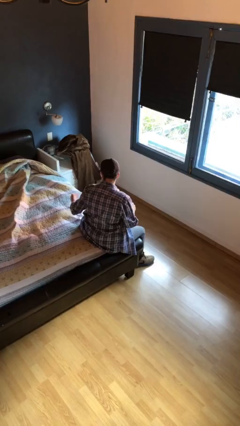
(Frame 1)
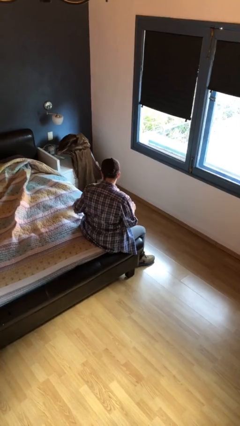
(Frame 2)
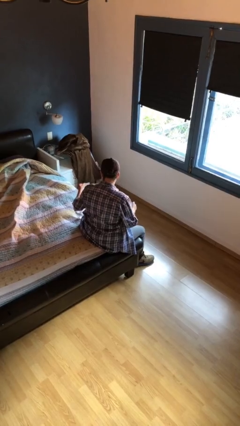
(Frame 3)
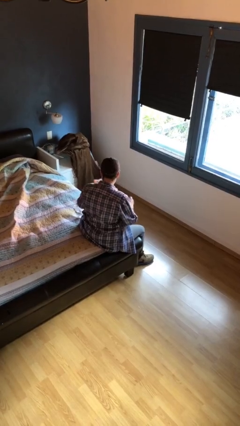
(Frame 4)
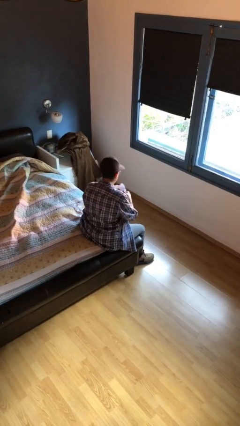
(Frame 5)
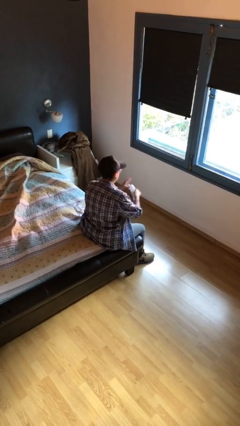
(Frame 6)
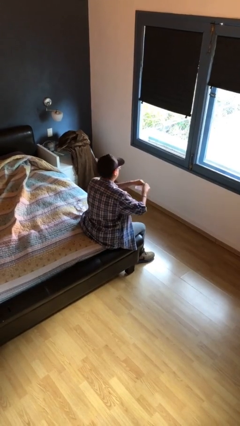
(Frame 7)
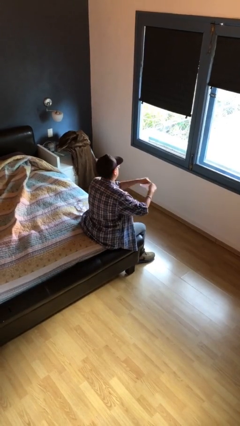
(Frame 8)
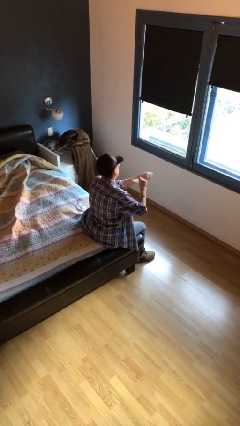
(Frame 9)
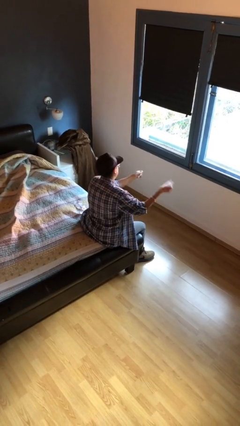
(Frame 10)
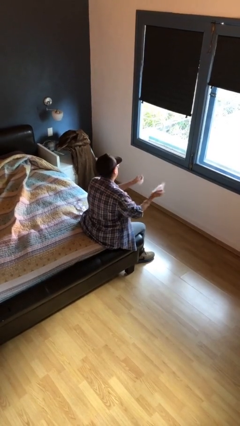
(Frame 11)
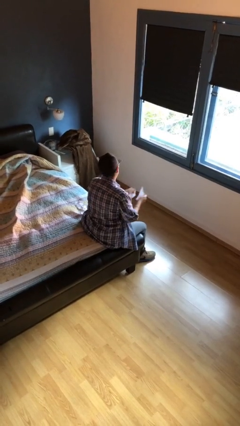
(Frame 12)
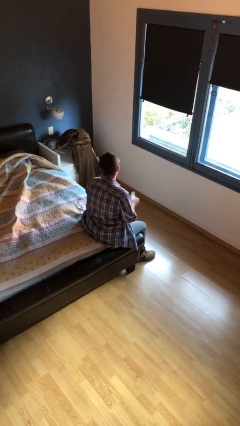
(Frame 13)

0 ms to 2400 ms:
person tears paper

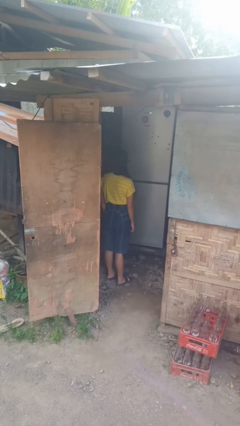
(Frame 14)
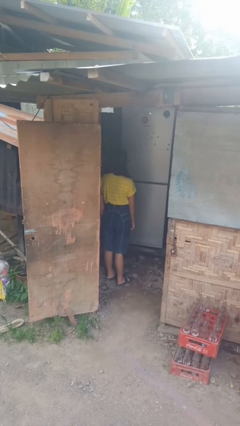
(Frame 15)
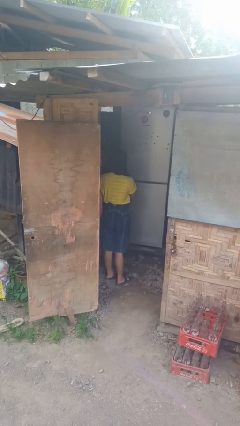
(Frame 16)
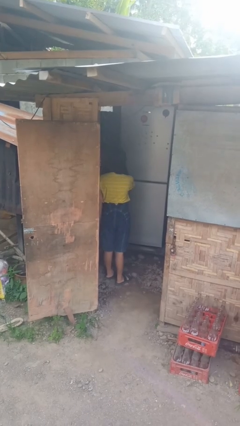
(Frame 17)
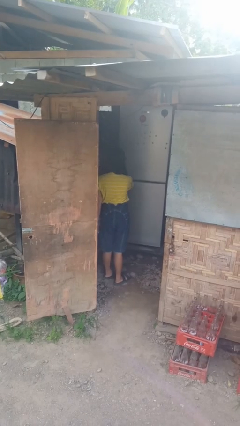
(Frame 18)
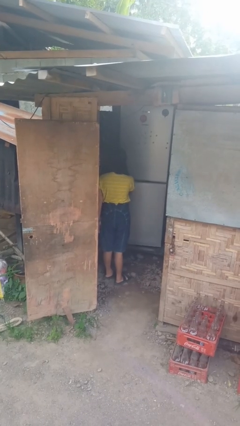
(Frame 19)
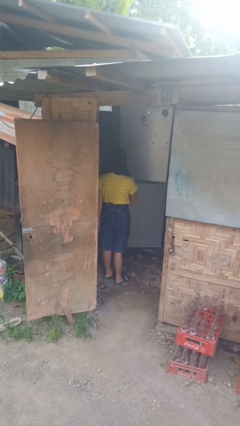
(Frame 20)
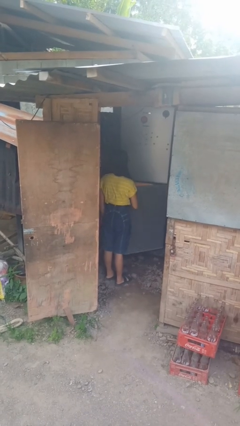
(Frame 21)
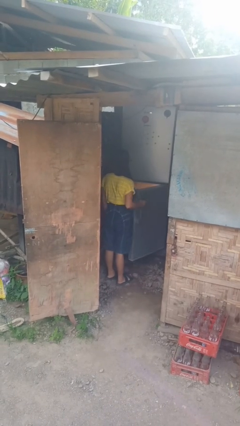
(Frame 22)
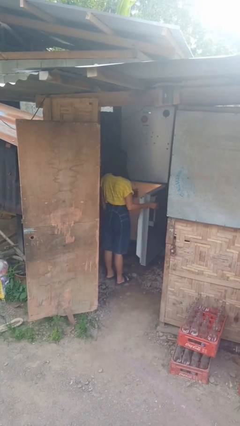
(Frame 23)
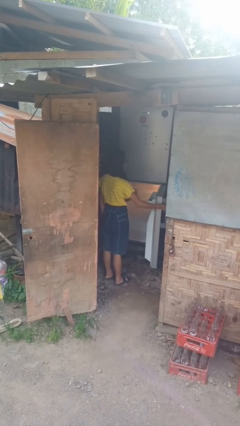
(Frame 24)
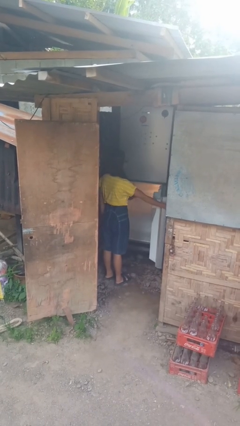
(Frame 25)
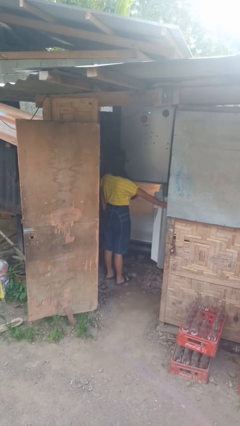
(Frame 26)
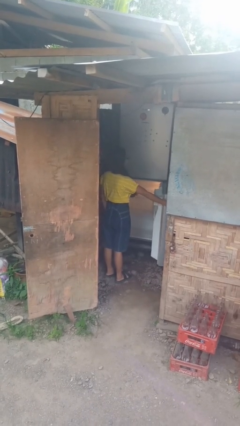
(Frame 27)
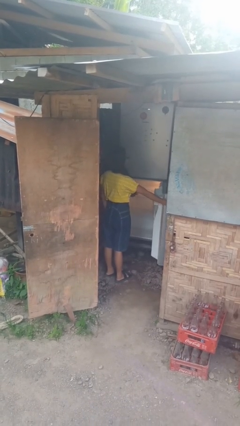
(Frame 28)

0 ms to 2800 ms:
person opens refrigerator

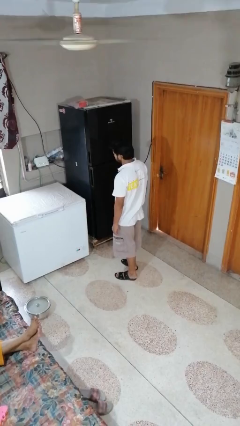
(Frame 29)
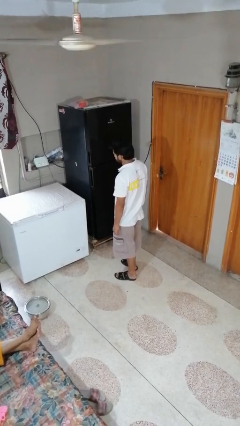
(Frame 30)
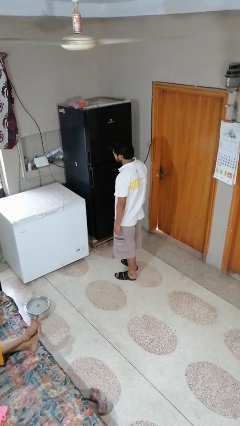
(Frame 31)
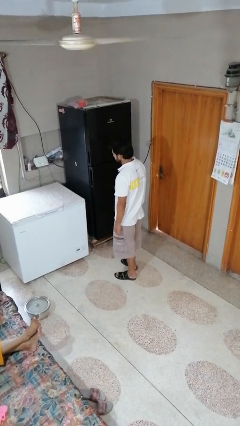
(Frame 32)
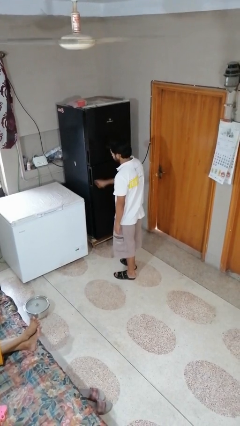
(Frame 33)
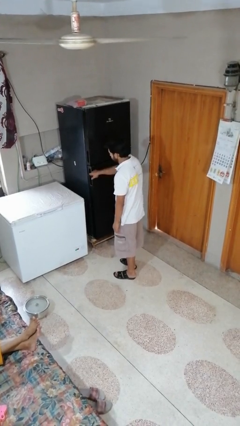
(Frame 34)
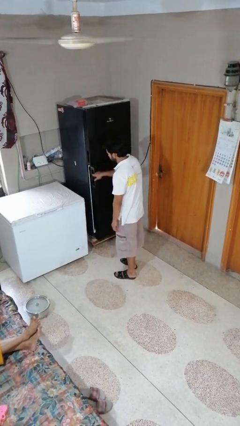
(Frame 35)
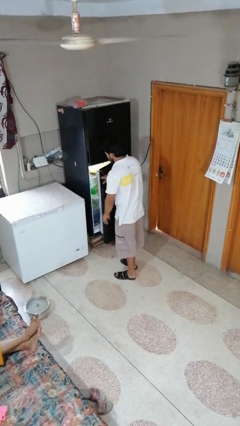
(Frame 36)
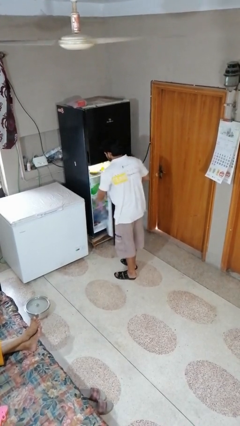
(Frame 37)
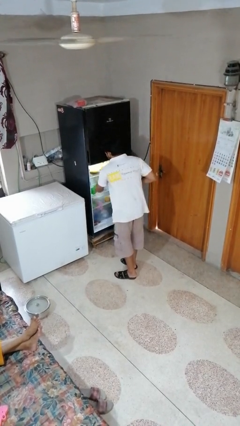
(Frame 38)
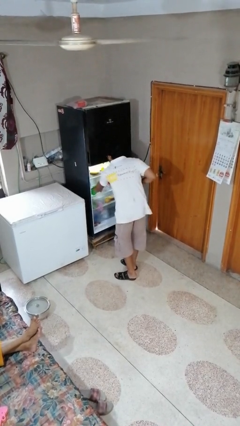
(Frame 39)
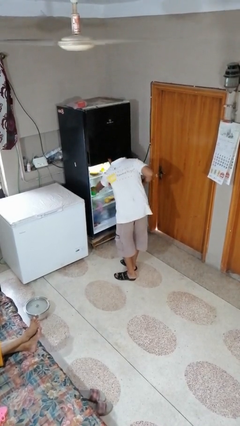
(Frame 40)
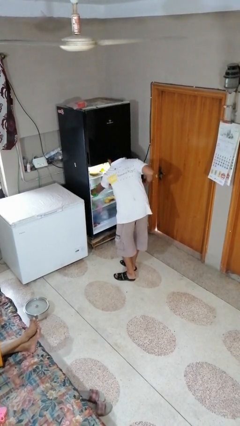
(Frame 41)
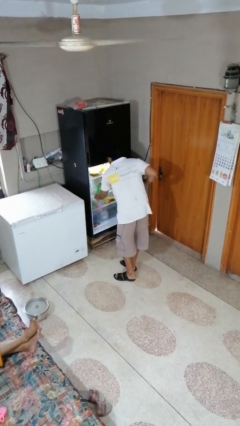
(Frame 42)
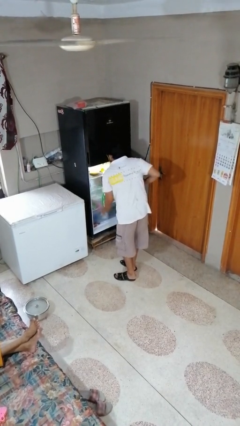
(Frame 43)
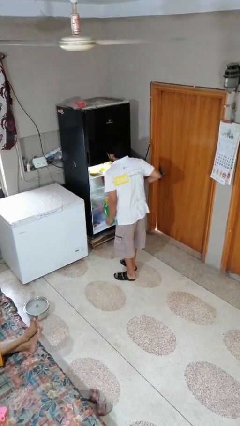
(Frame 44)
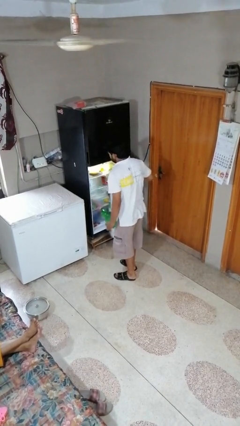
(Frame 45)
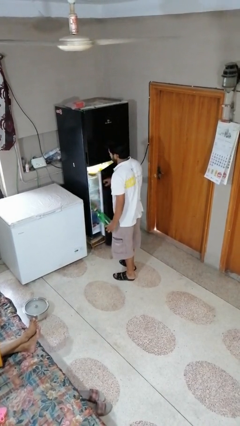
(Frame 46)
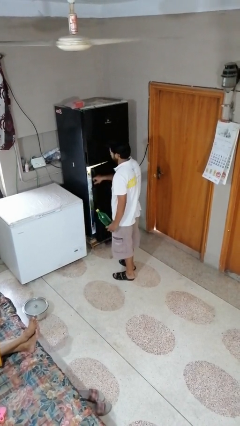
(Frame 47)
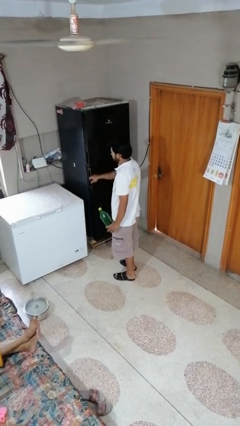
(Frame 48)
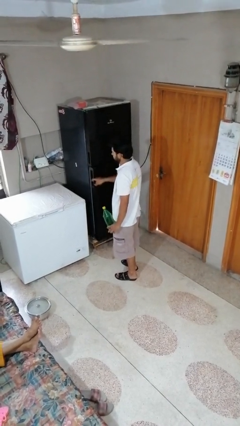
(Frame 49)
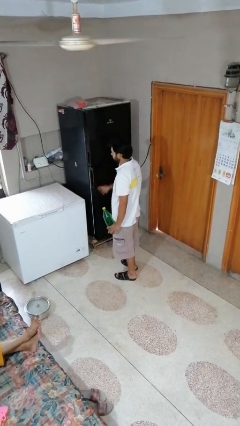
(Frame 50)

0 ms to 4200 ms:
person takes object from refrigerator

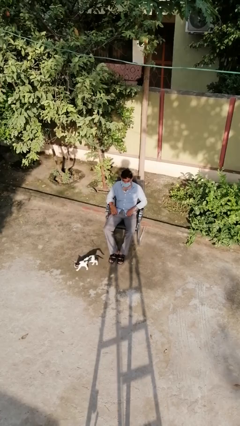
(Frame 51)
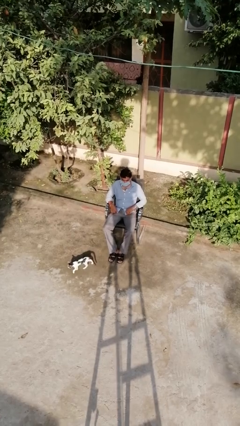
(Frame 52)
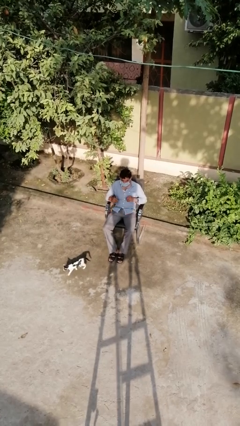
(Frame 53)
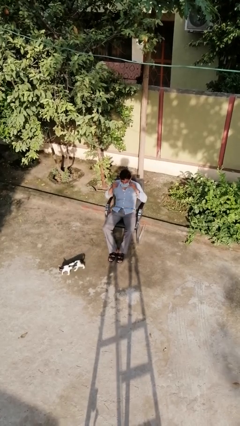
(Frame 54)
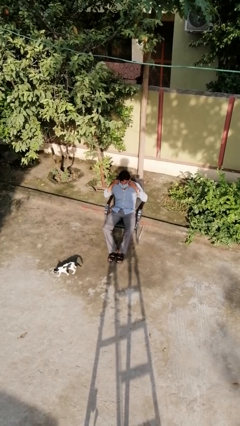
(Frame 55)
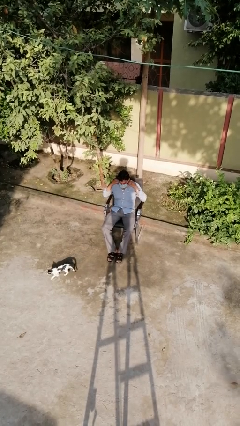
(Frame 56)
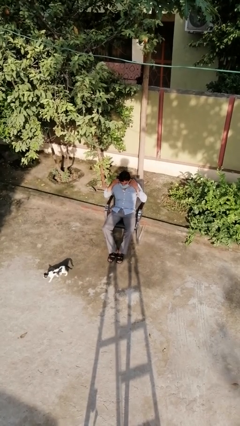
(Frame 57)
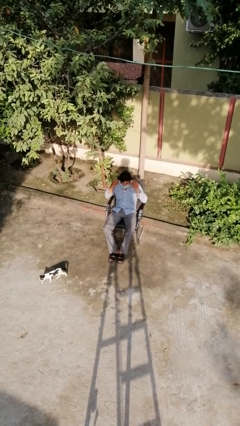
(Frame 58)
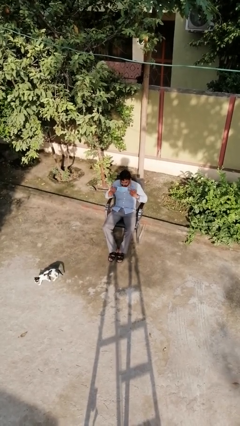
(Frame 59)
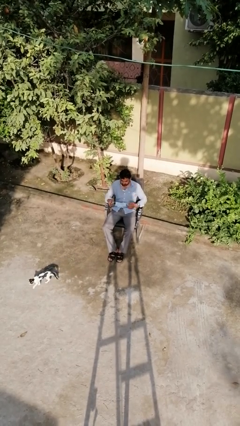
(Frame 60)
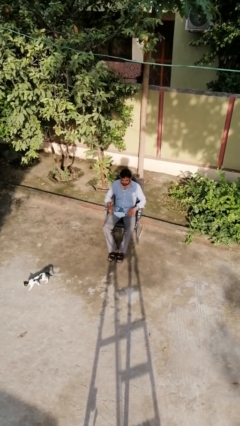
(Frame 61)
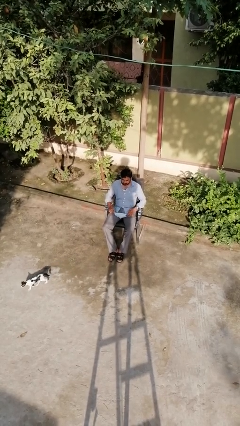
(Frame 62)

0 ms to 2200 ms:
person takes off facemask

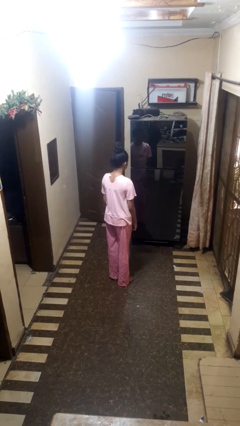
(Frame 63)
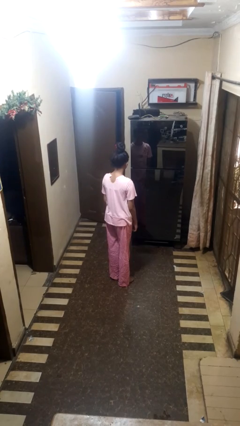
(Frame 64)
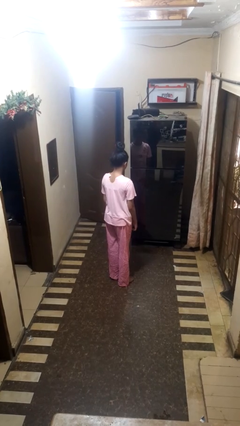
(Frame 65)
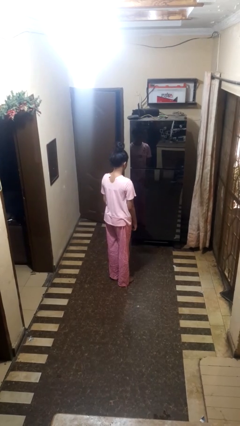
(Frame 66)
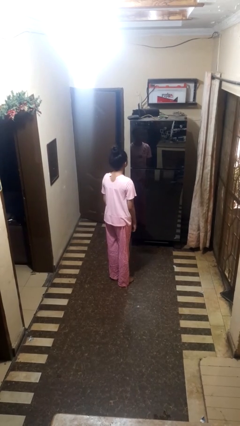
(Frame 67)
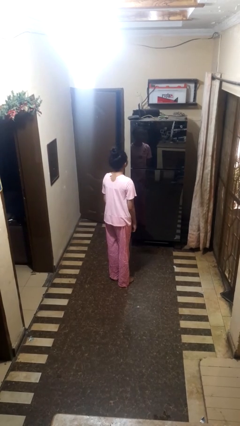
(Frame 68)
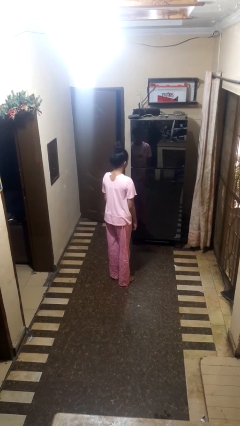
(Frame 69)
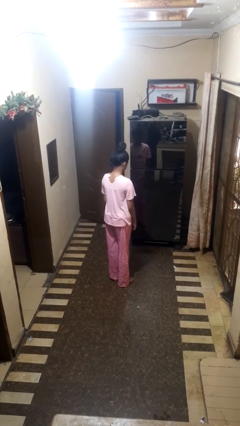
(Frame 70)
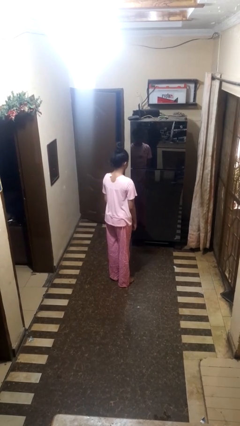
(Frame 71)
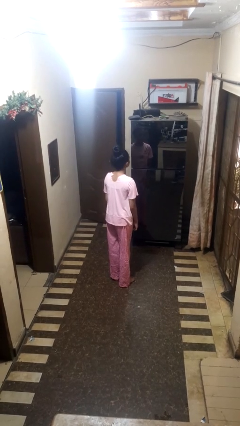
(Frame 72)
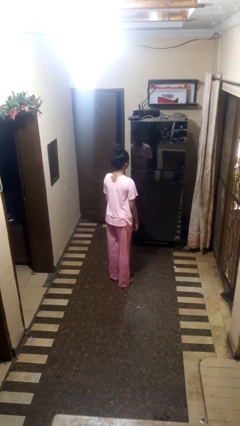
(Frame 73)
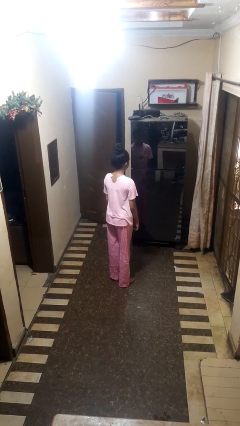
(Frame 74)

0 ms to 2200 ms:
person shakes head

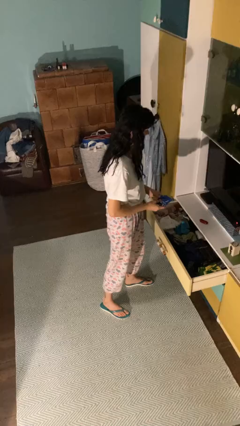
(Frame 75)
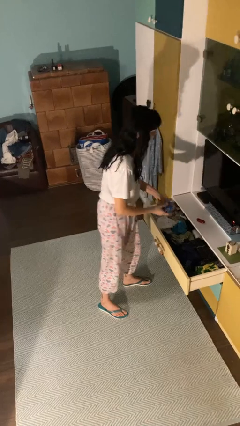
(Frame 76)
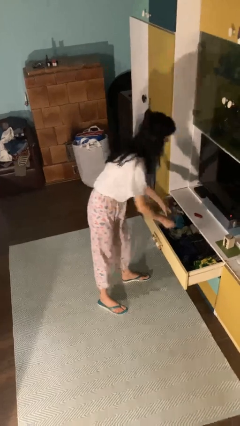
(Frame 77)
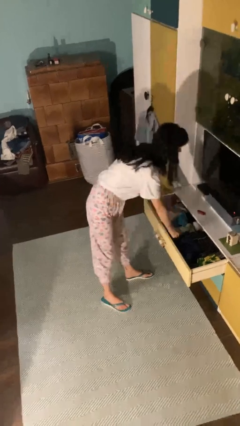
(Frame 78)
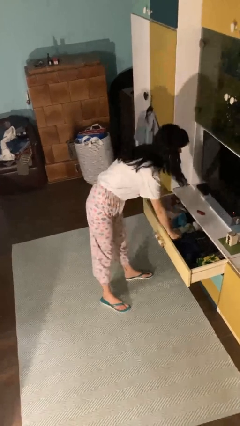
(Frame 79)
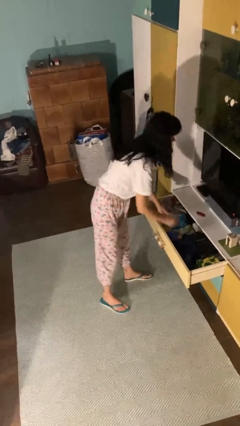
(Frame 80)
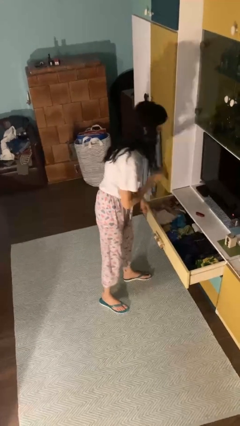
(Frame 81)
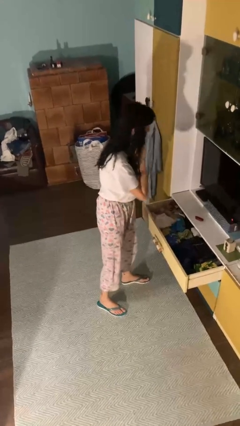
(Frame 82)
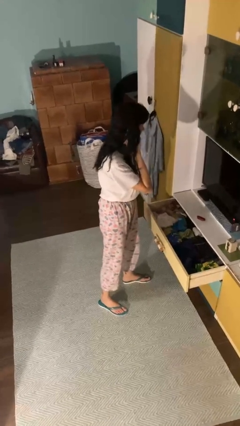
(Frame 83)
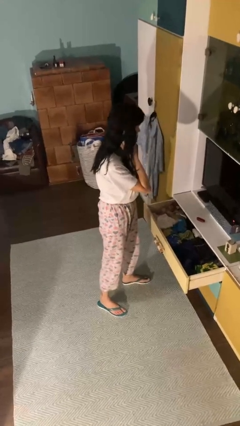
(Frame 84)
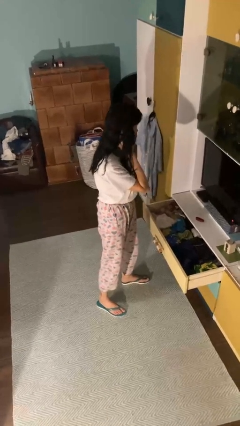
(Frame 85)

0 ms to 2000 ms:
person puts clothes into dresser

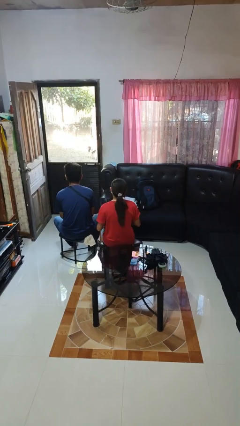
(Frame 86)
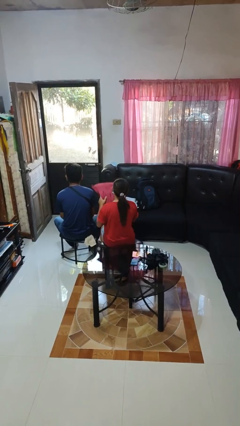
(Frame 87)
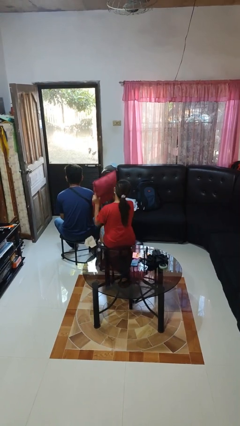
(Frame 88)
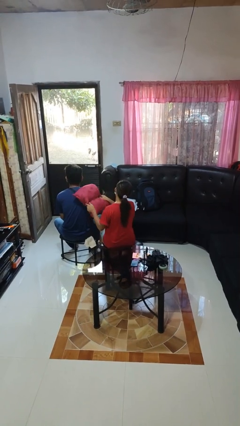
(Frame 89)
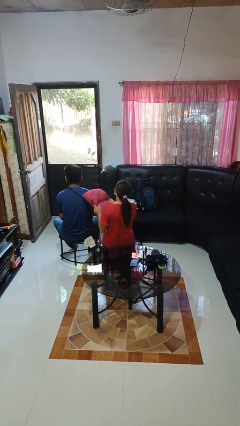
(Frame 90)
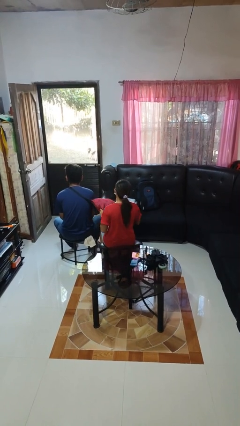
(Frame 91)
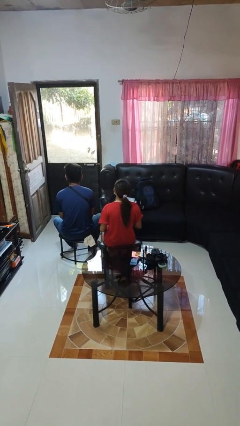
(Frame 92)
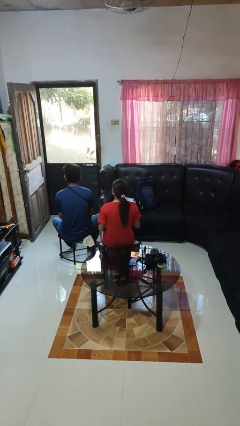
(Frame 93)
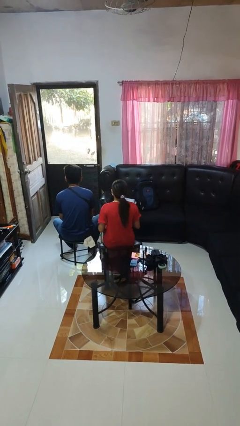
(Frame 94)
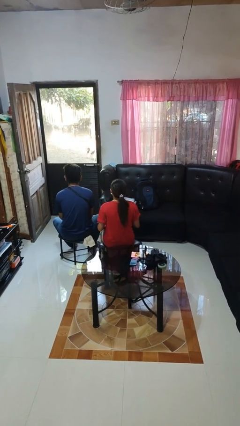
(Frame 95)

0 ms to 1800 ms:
person hits person with pillow
